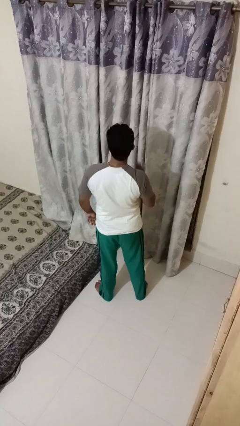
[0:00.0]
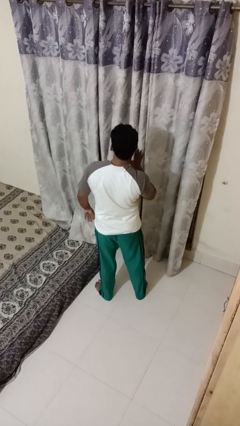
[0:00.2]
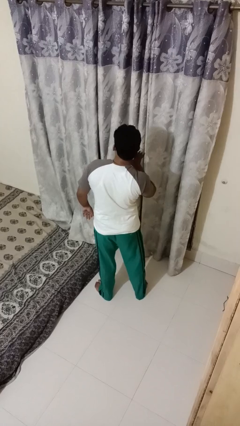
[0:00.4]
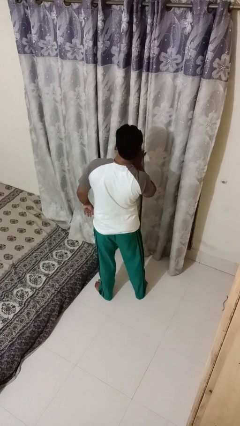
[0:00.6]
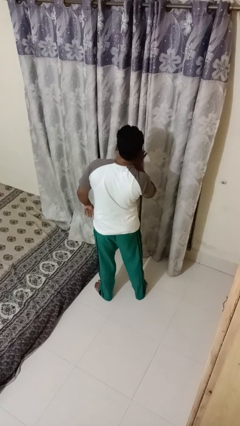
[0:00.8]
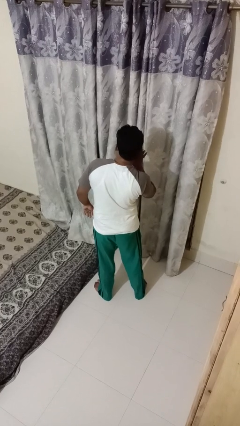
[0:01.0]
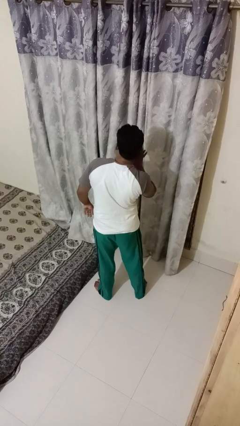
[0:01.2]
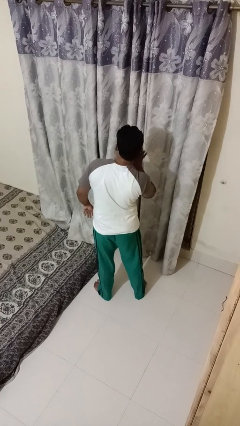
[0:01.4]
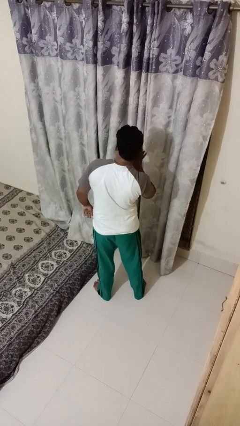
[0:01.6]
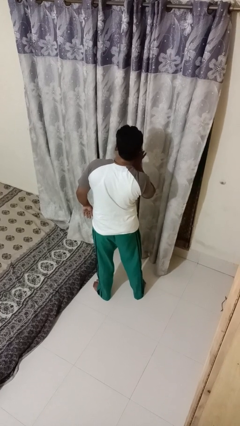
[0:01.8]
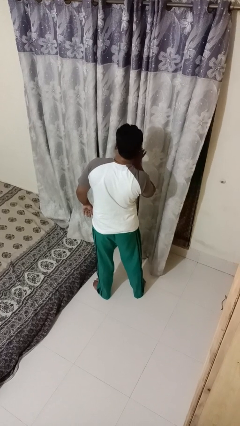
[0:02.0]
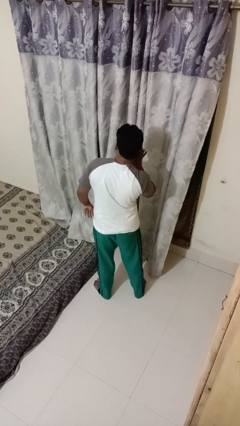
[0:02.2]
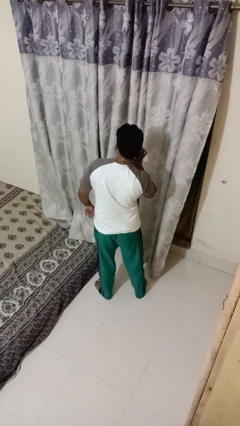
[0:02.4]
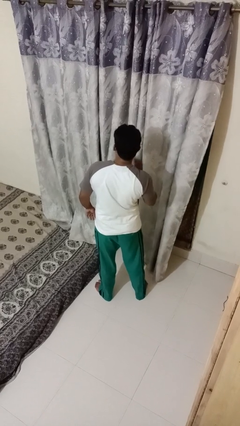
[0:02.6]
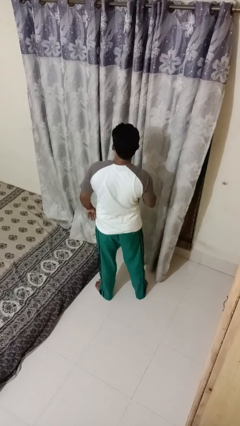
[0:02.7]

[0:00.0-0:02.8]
person gestures listen closely

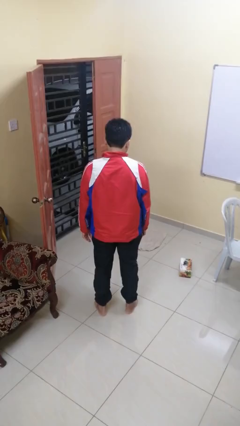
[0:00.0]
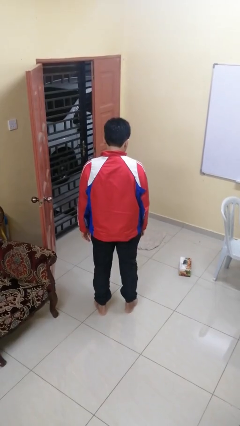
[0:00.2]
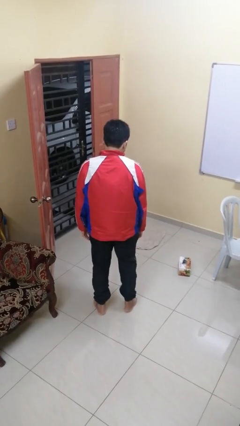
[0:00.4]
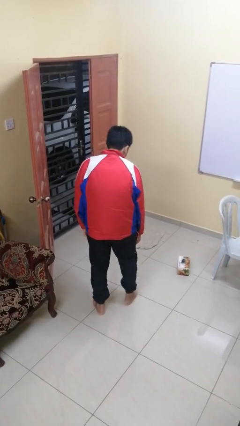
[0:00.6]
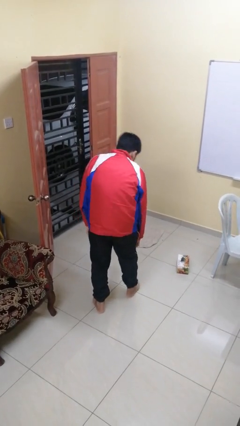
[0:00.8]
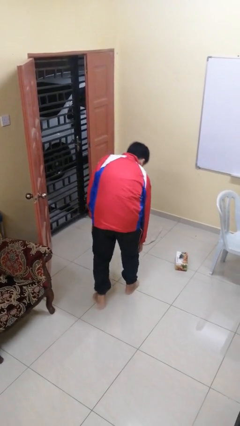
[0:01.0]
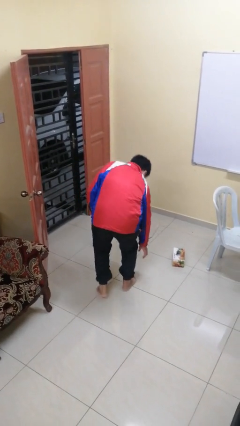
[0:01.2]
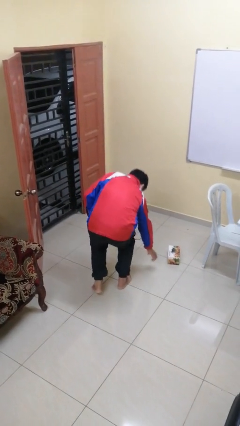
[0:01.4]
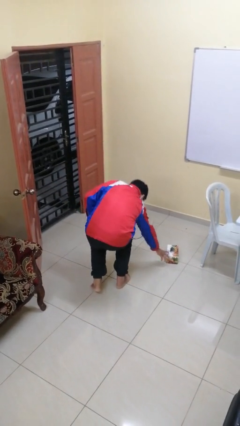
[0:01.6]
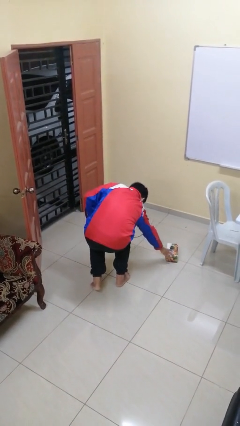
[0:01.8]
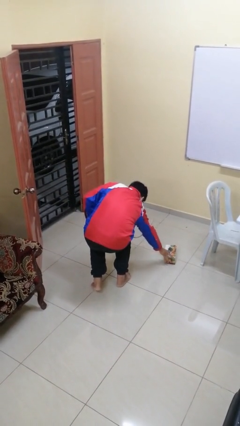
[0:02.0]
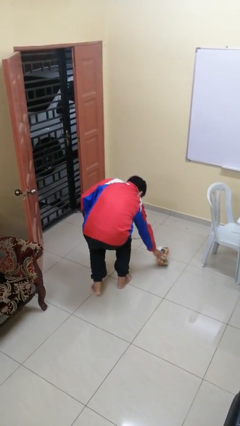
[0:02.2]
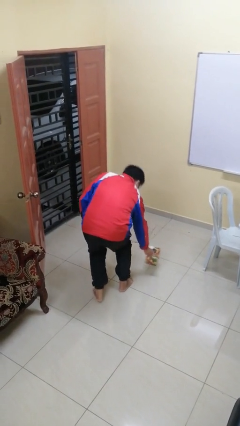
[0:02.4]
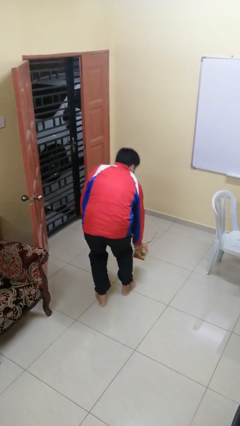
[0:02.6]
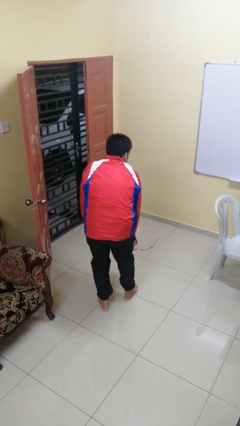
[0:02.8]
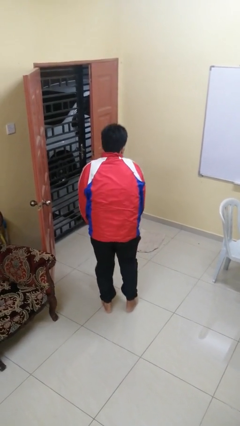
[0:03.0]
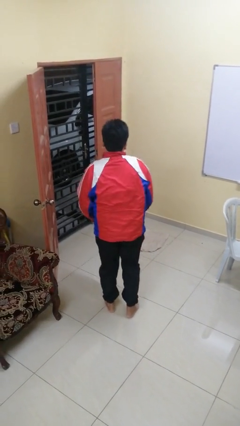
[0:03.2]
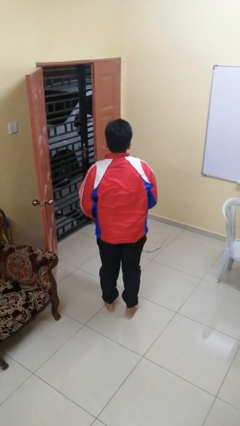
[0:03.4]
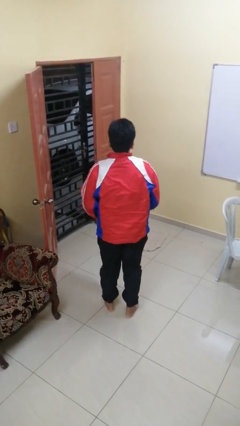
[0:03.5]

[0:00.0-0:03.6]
person picks up object from floor

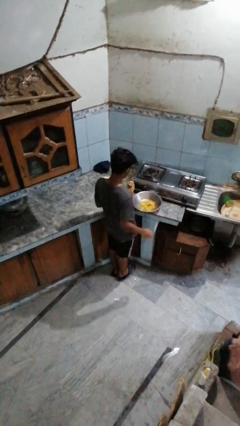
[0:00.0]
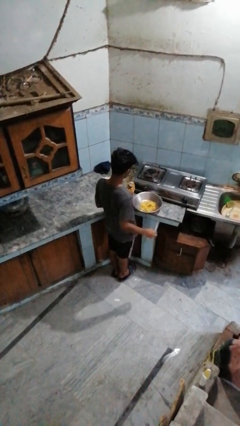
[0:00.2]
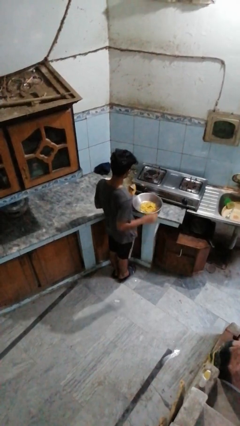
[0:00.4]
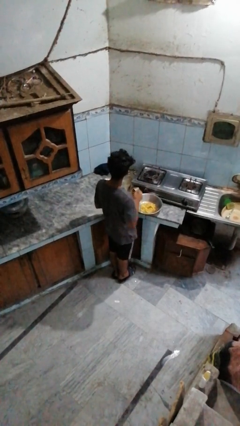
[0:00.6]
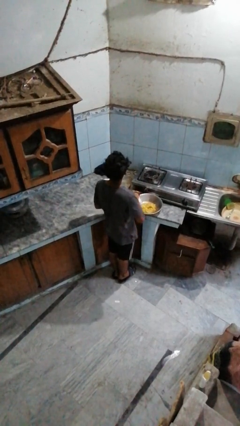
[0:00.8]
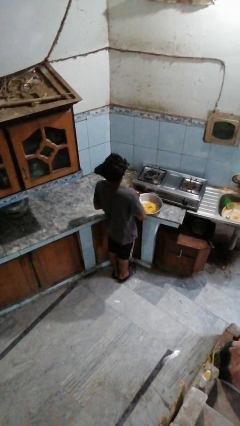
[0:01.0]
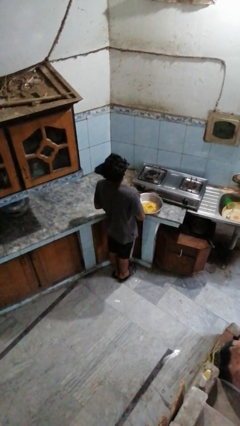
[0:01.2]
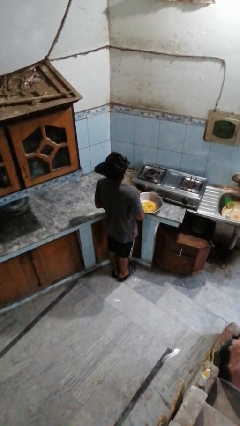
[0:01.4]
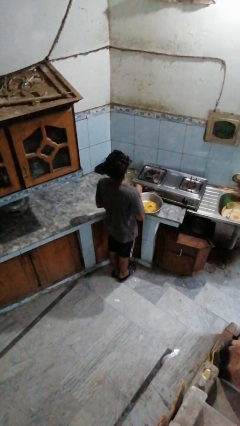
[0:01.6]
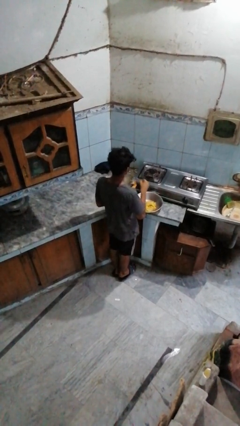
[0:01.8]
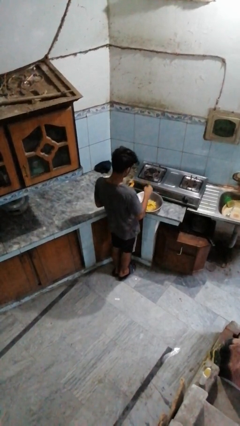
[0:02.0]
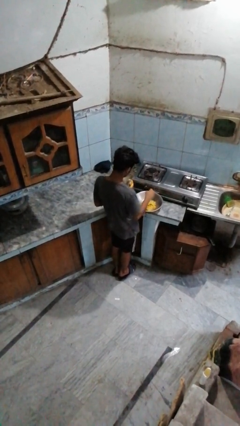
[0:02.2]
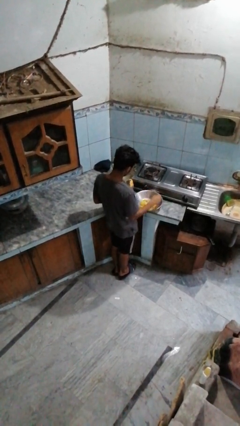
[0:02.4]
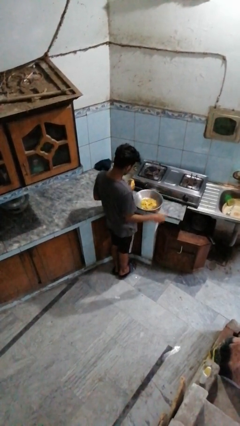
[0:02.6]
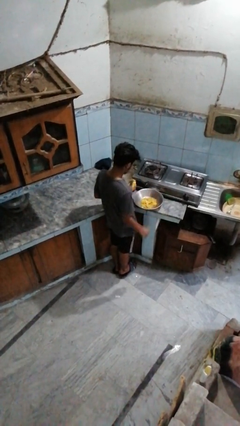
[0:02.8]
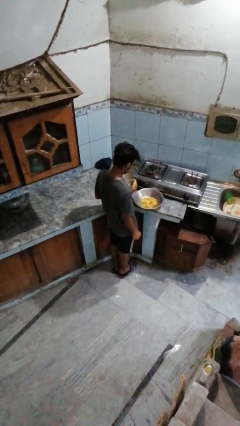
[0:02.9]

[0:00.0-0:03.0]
person pours into bowl

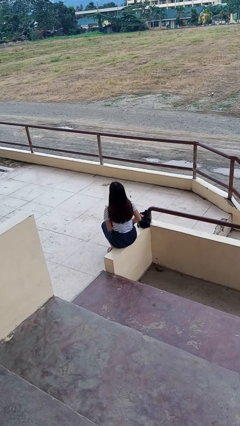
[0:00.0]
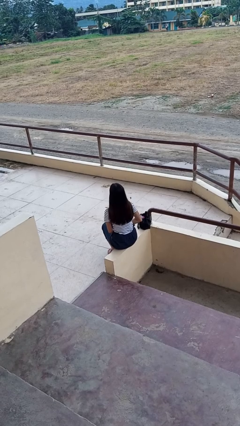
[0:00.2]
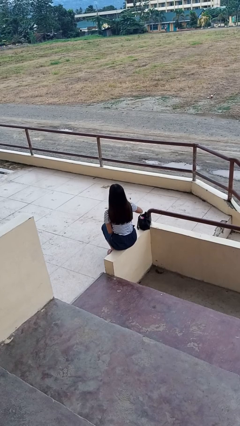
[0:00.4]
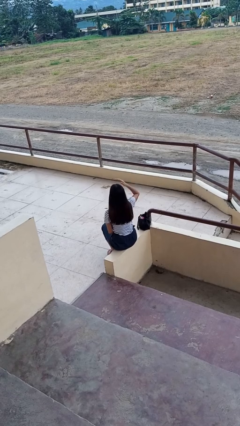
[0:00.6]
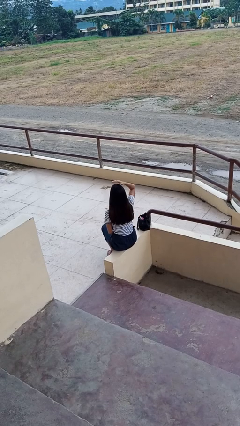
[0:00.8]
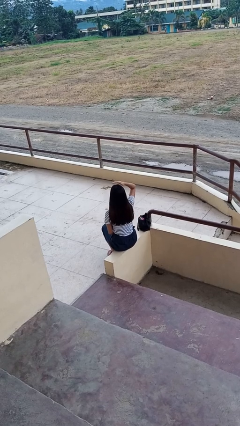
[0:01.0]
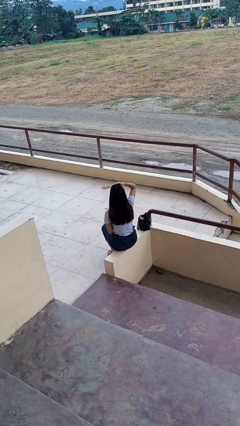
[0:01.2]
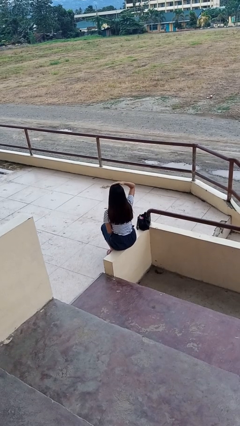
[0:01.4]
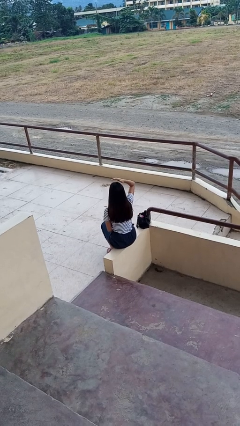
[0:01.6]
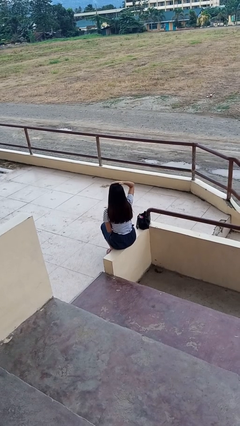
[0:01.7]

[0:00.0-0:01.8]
person pats head

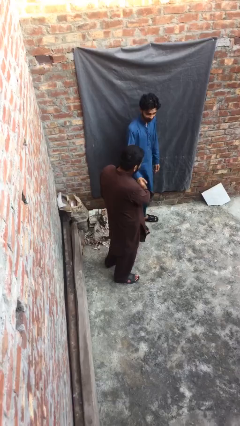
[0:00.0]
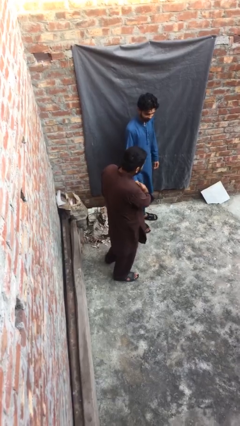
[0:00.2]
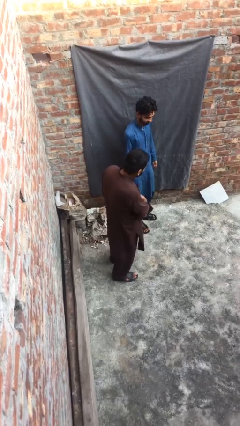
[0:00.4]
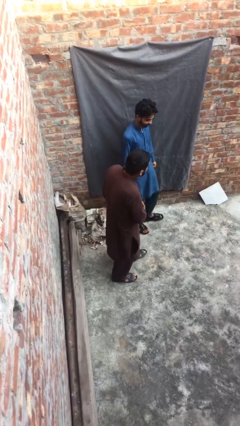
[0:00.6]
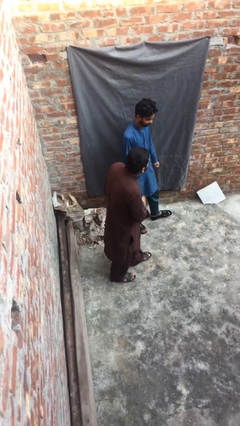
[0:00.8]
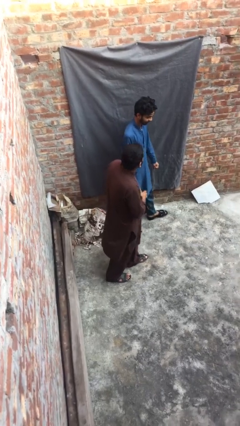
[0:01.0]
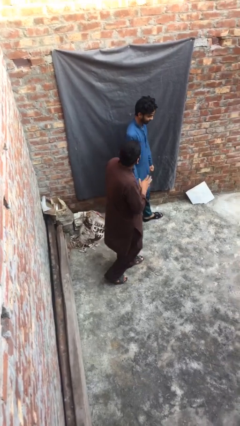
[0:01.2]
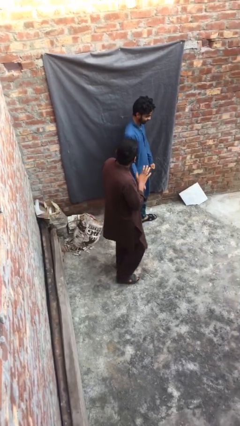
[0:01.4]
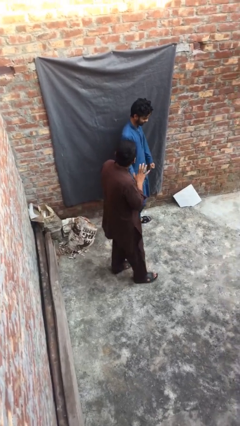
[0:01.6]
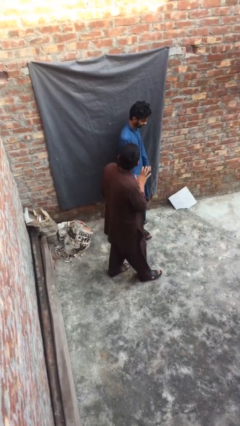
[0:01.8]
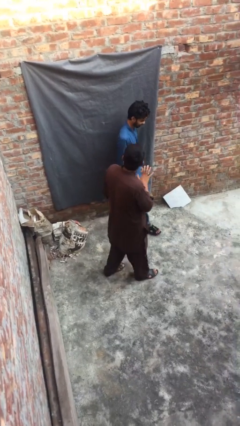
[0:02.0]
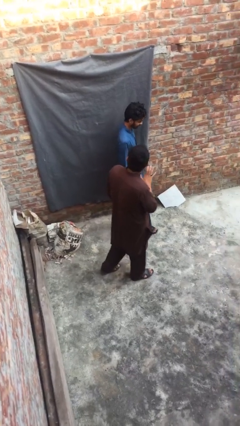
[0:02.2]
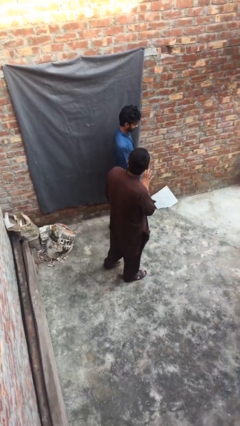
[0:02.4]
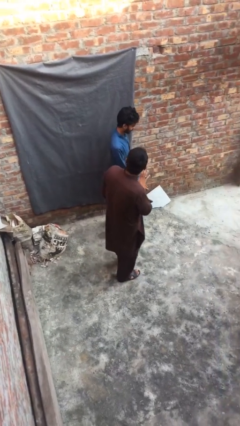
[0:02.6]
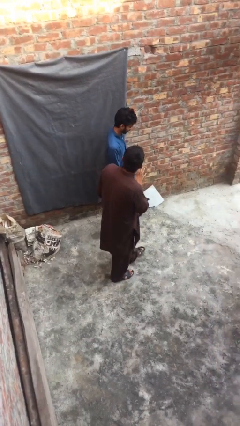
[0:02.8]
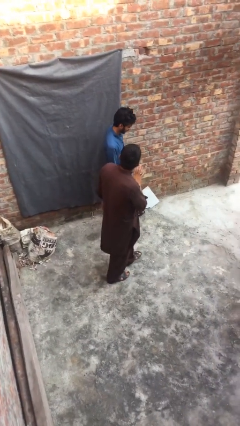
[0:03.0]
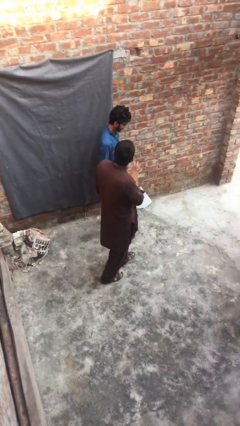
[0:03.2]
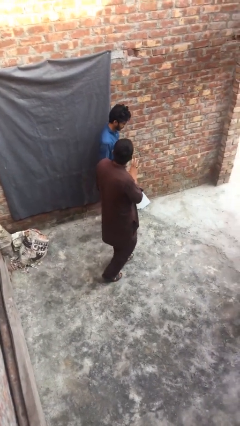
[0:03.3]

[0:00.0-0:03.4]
person talks to person

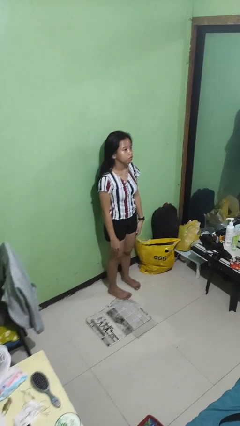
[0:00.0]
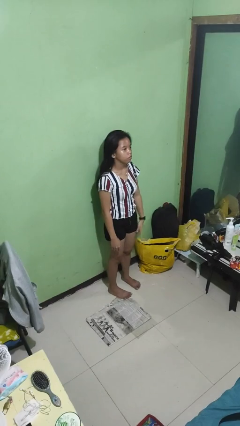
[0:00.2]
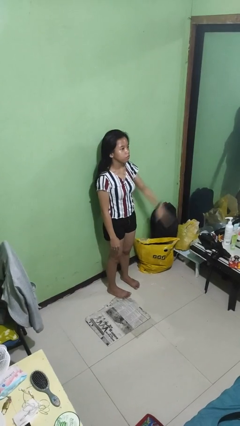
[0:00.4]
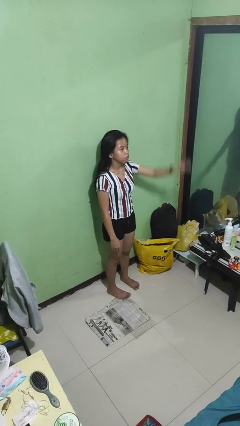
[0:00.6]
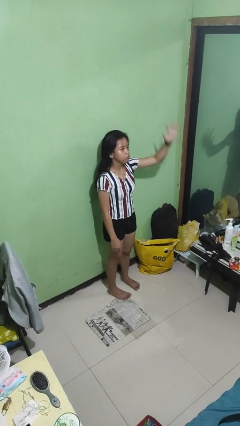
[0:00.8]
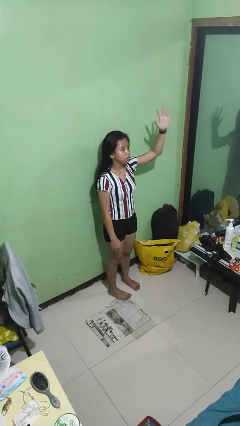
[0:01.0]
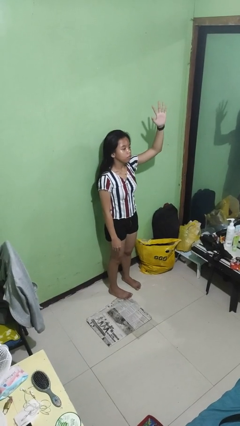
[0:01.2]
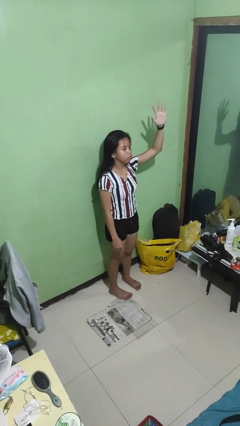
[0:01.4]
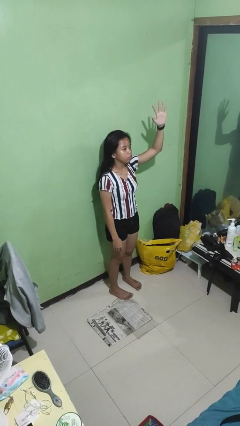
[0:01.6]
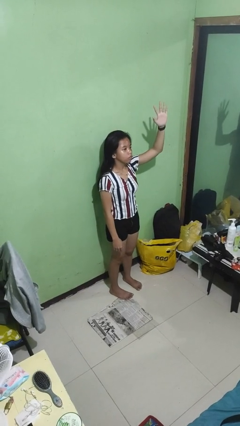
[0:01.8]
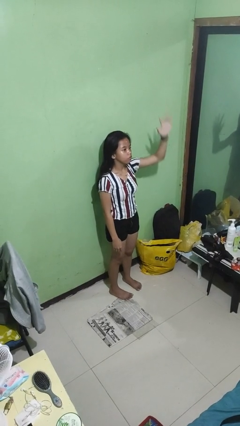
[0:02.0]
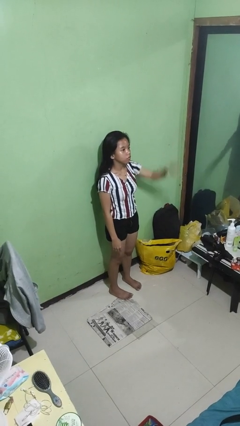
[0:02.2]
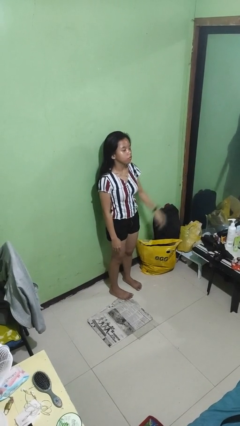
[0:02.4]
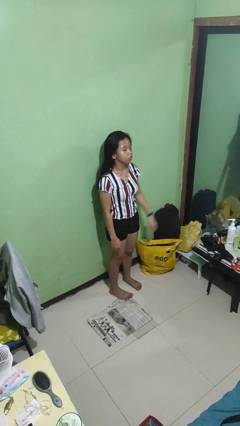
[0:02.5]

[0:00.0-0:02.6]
person gestures number five
